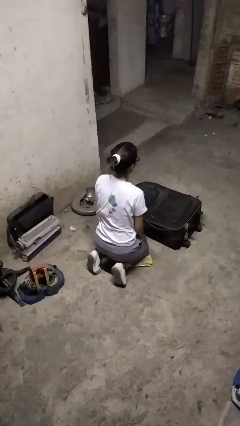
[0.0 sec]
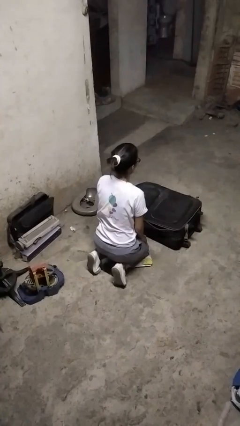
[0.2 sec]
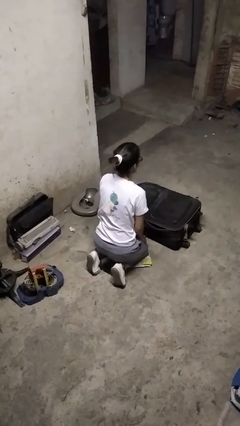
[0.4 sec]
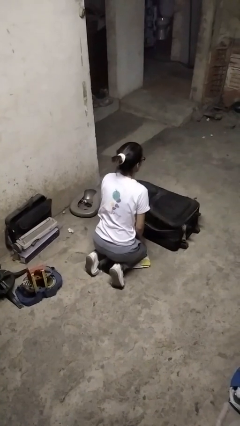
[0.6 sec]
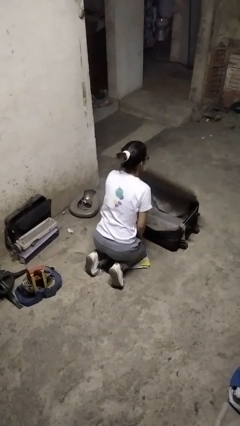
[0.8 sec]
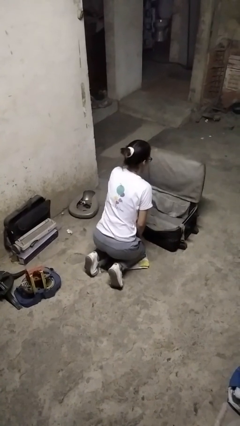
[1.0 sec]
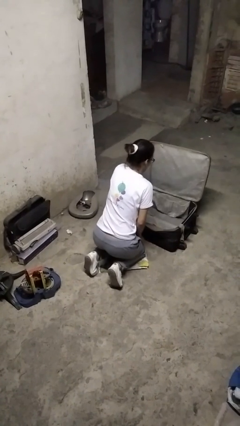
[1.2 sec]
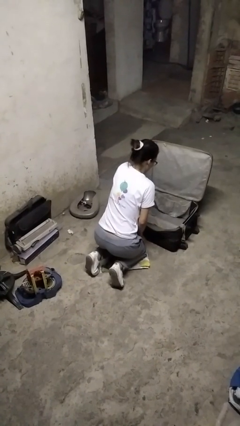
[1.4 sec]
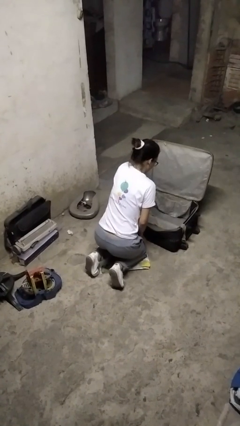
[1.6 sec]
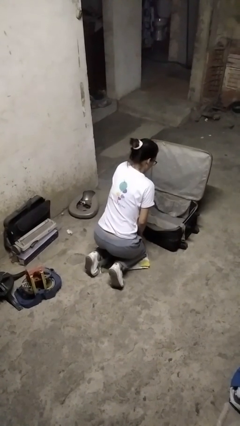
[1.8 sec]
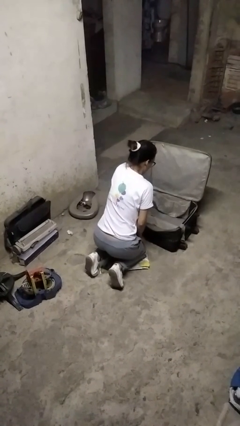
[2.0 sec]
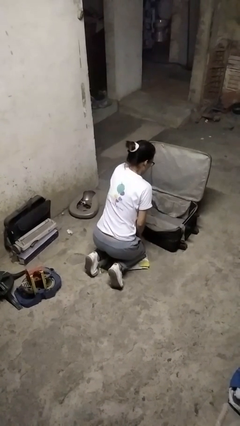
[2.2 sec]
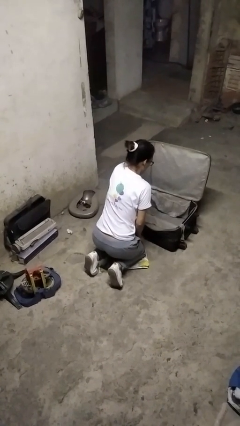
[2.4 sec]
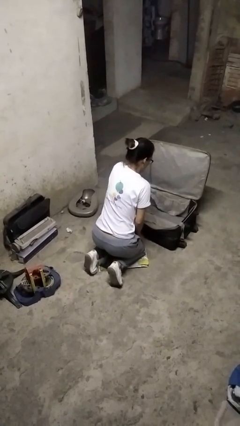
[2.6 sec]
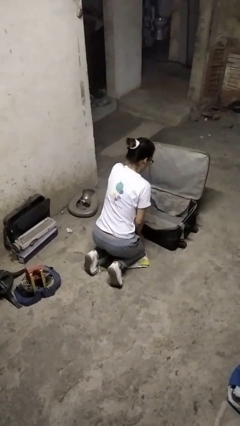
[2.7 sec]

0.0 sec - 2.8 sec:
person opens suitcase

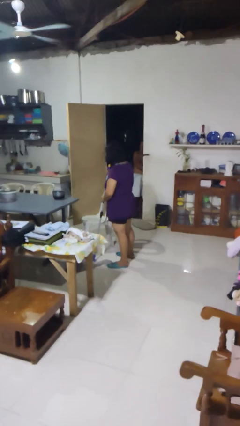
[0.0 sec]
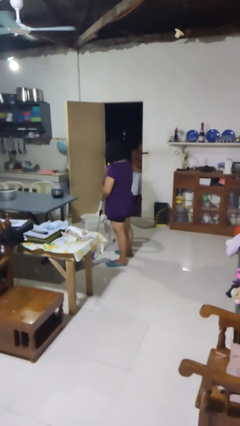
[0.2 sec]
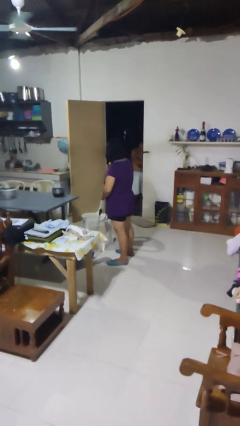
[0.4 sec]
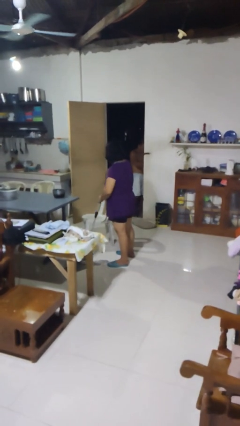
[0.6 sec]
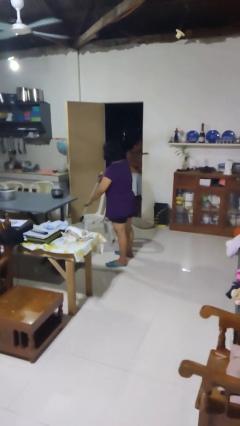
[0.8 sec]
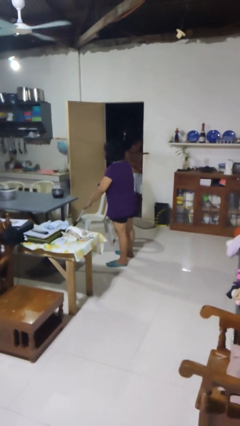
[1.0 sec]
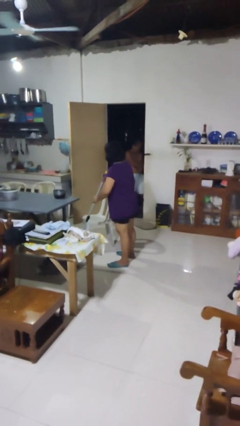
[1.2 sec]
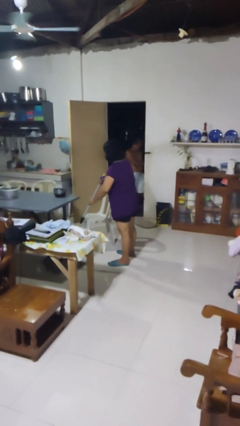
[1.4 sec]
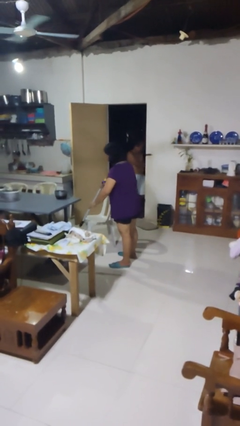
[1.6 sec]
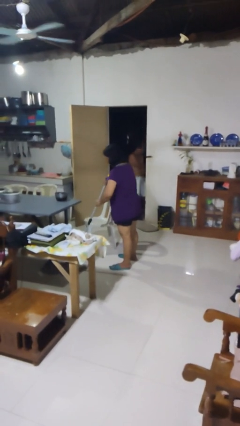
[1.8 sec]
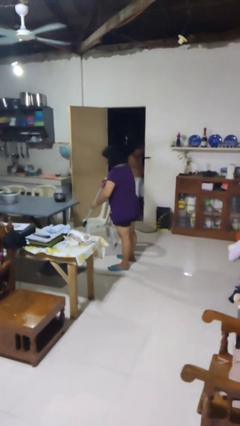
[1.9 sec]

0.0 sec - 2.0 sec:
person mops

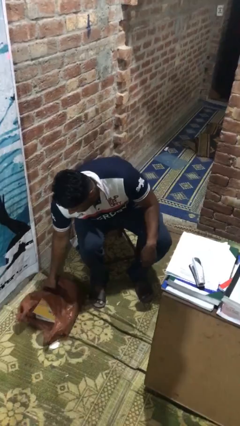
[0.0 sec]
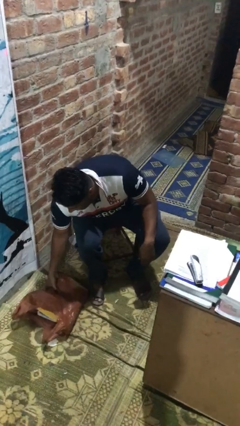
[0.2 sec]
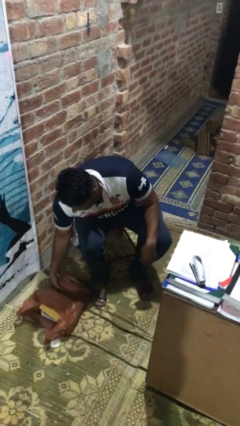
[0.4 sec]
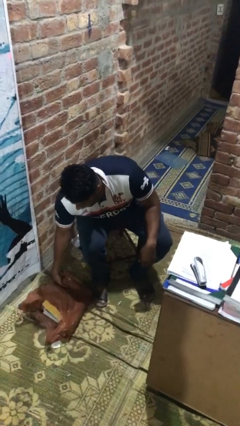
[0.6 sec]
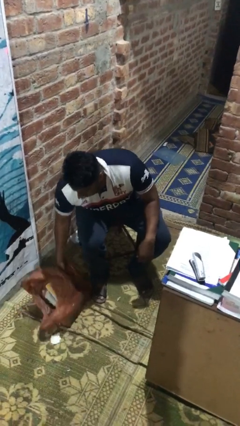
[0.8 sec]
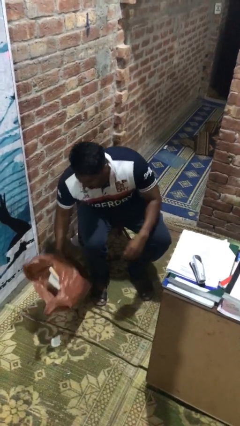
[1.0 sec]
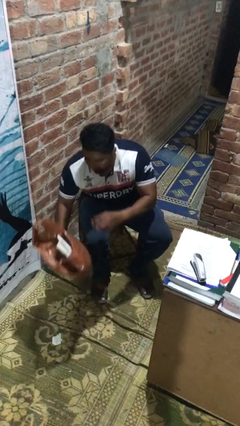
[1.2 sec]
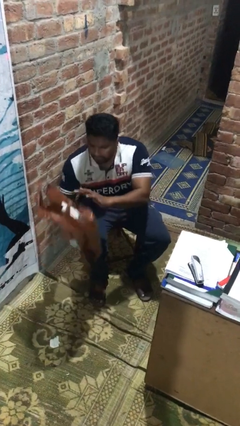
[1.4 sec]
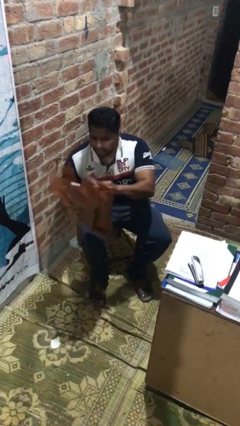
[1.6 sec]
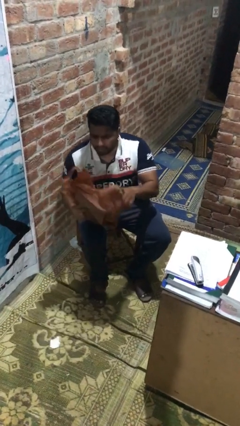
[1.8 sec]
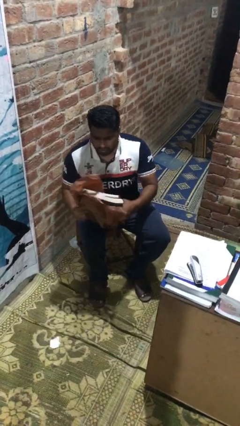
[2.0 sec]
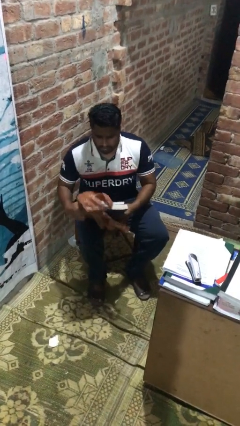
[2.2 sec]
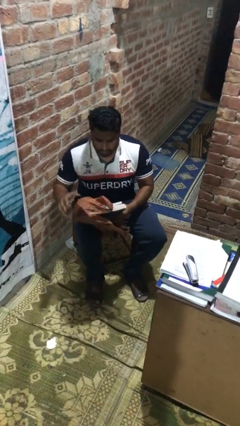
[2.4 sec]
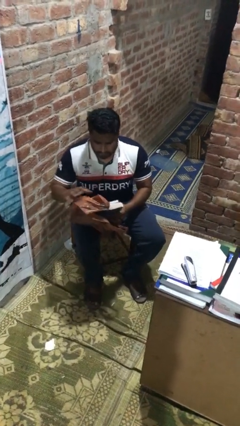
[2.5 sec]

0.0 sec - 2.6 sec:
person picks up object from floor

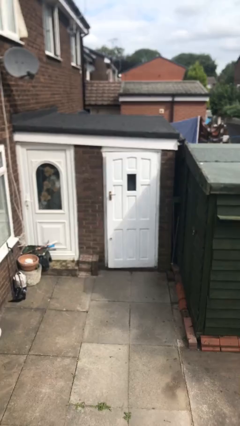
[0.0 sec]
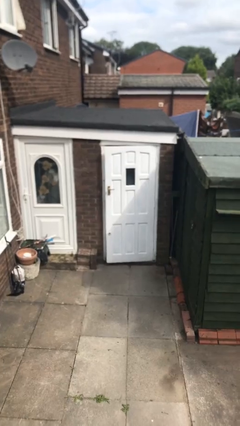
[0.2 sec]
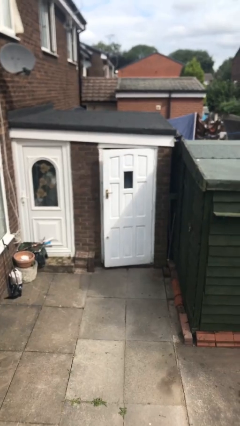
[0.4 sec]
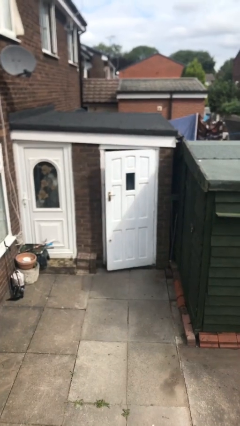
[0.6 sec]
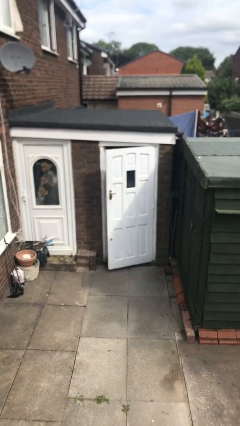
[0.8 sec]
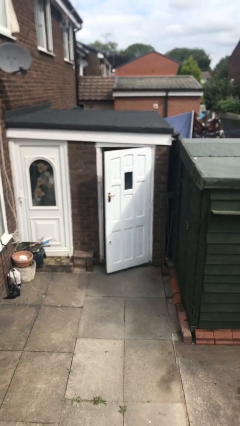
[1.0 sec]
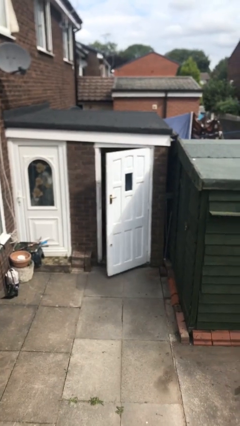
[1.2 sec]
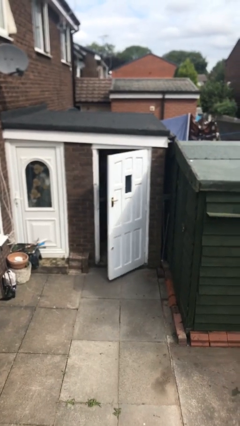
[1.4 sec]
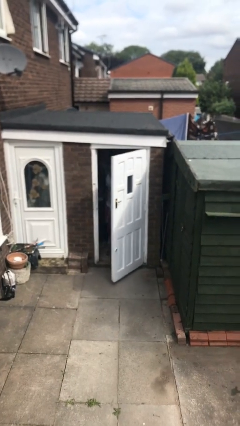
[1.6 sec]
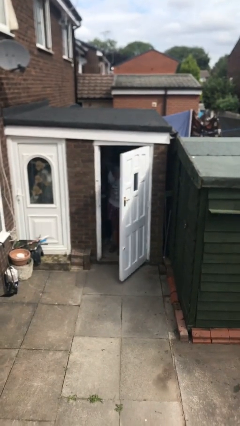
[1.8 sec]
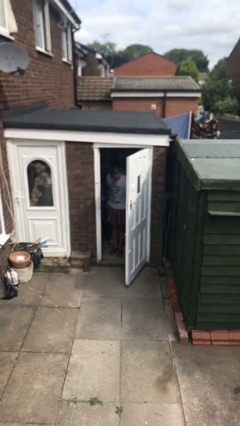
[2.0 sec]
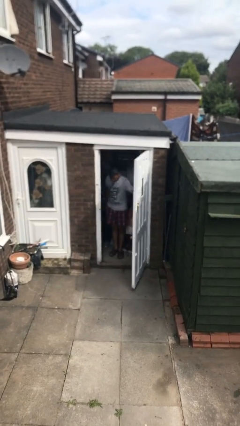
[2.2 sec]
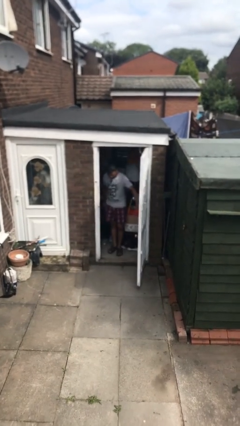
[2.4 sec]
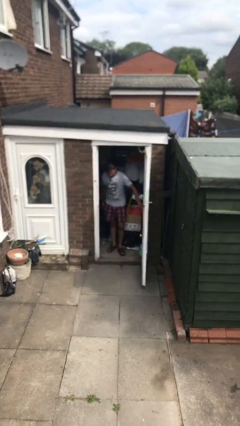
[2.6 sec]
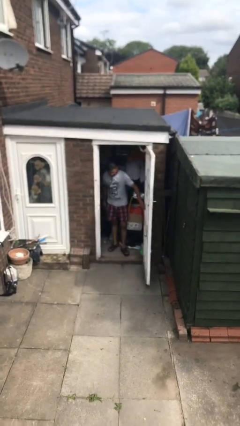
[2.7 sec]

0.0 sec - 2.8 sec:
person opens facility door

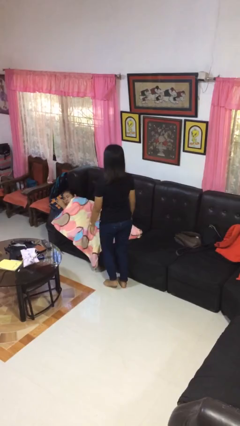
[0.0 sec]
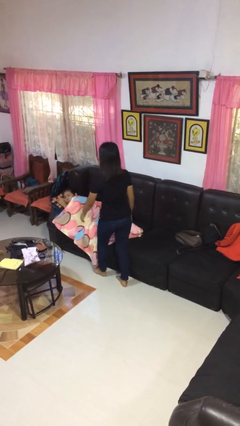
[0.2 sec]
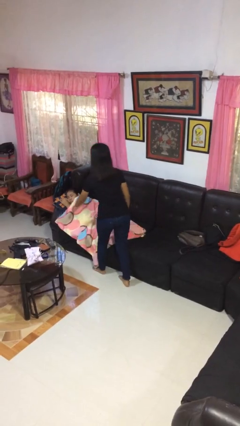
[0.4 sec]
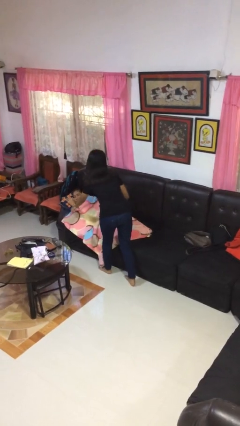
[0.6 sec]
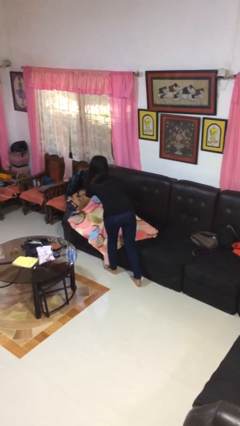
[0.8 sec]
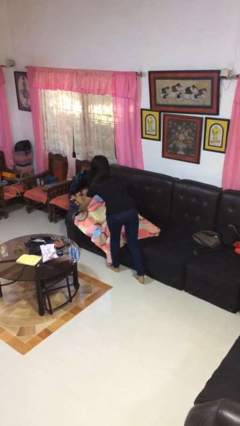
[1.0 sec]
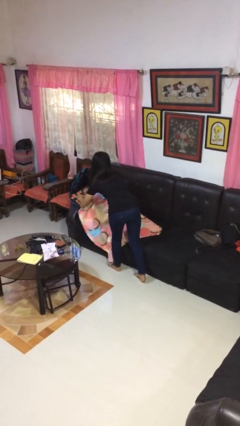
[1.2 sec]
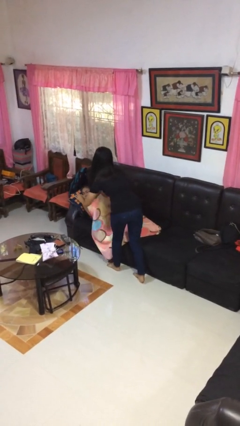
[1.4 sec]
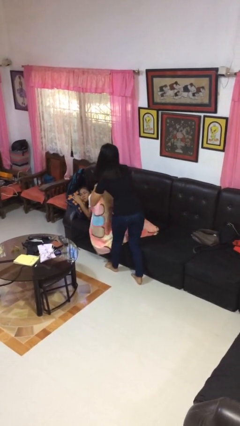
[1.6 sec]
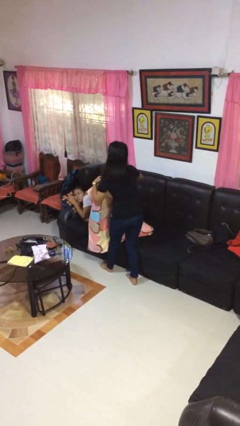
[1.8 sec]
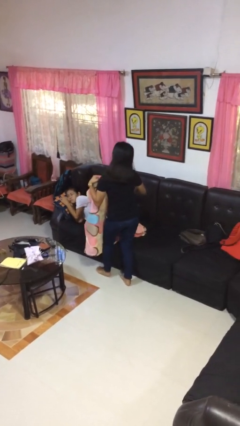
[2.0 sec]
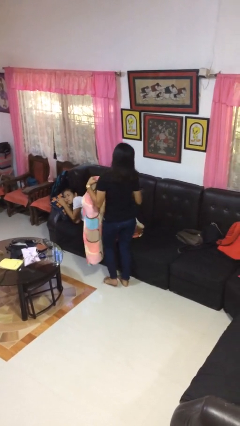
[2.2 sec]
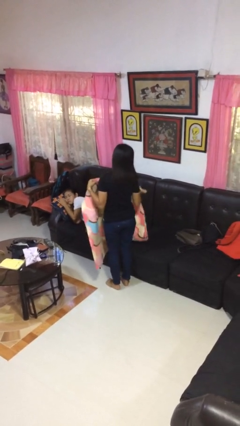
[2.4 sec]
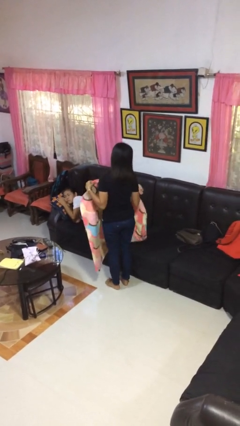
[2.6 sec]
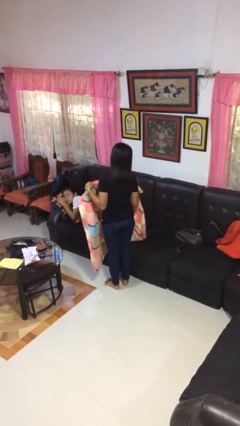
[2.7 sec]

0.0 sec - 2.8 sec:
person uncovers friend with blanket

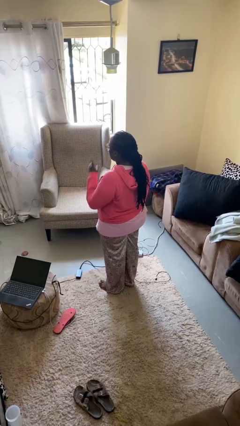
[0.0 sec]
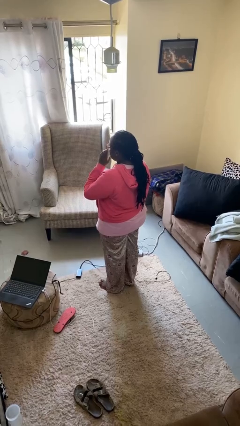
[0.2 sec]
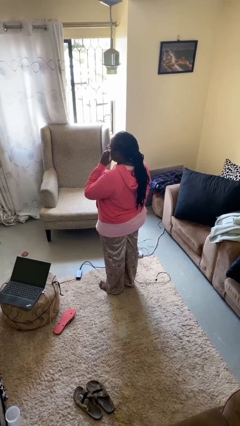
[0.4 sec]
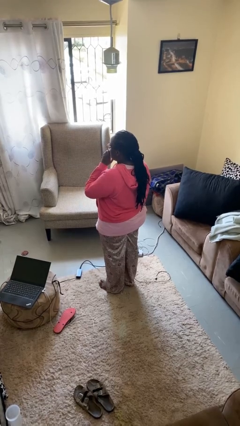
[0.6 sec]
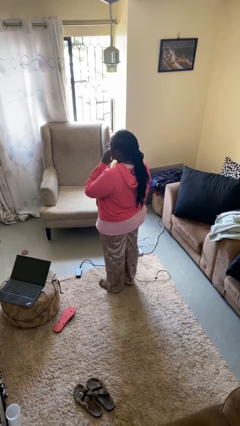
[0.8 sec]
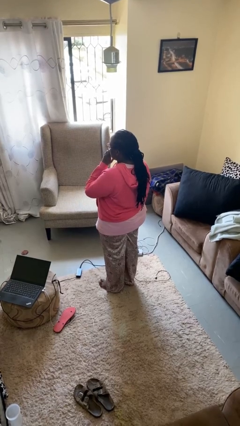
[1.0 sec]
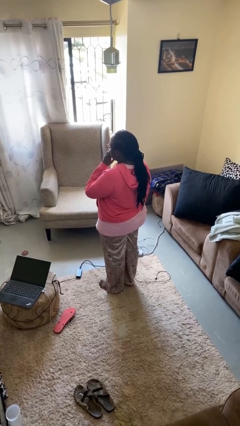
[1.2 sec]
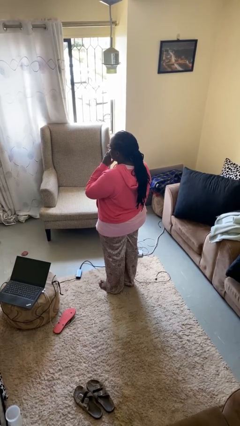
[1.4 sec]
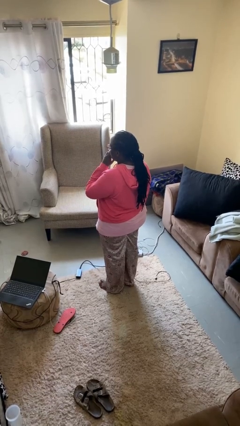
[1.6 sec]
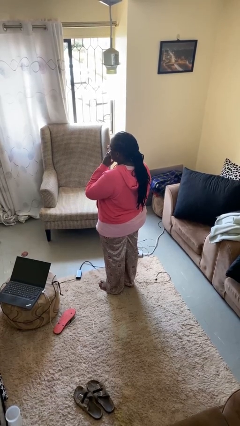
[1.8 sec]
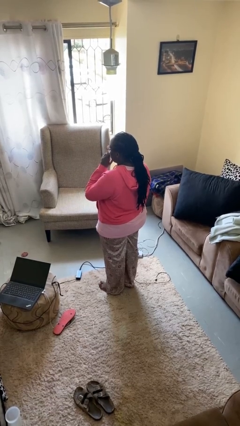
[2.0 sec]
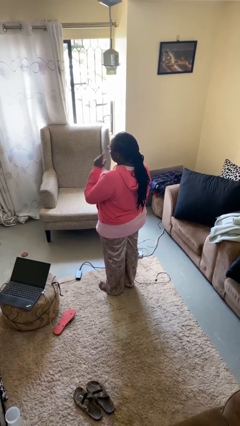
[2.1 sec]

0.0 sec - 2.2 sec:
person gestures be quiet

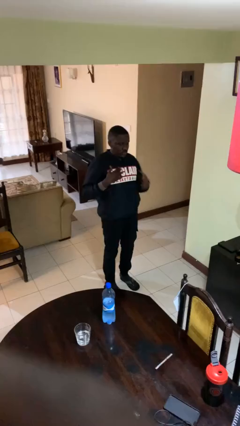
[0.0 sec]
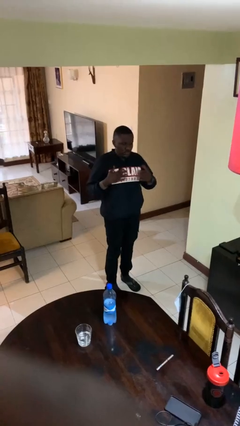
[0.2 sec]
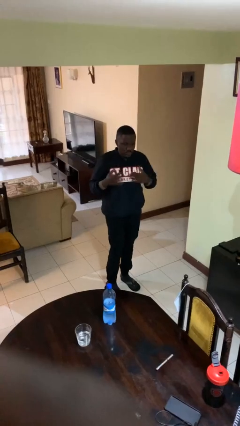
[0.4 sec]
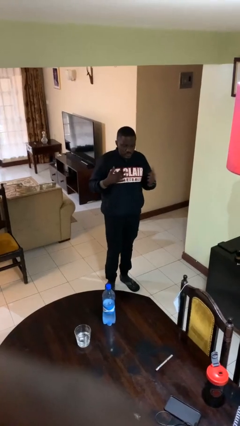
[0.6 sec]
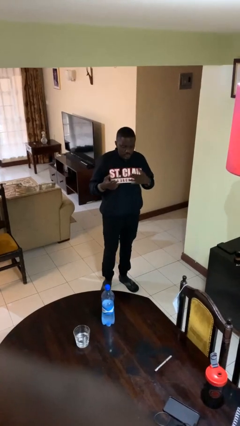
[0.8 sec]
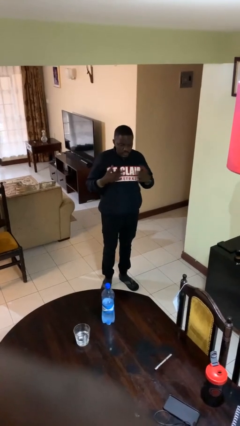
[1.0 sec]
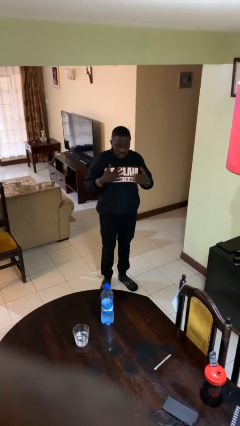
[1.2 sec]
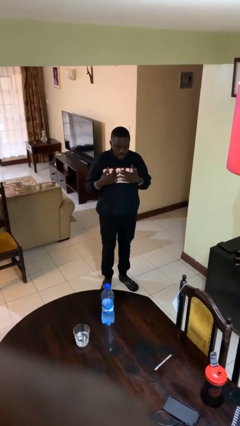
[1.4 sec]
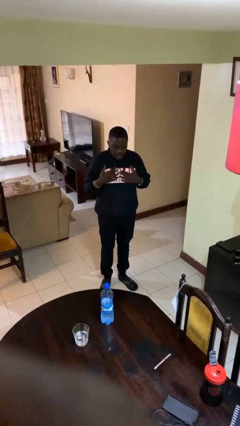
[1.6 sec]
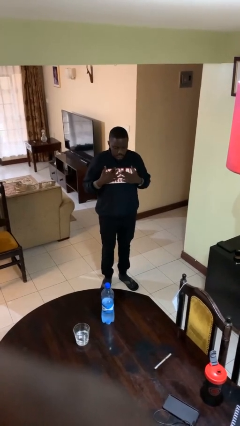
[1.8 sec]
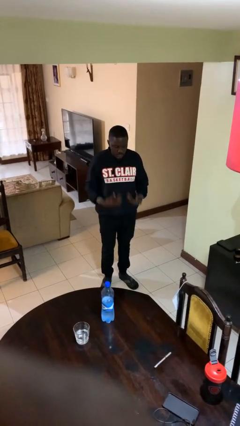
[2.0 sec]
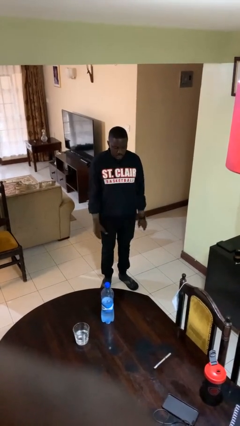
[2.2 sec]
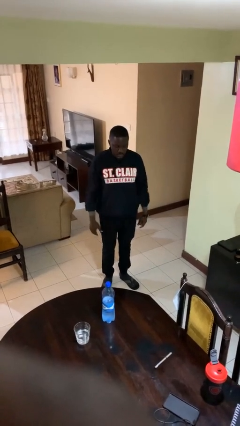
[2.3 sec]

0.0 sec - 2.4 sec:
person drums on chest
